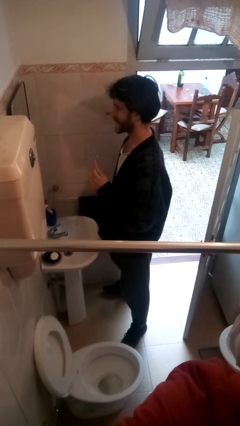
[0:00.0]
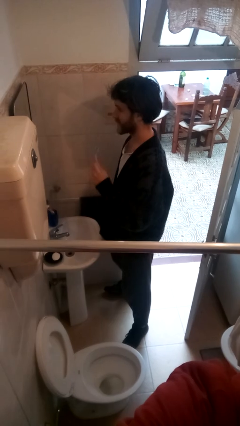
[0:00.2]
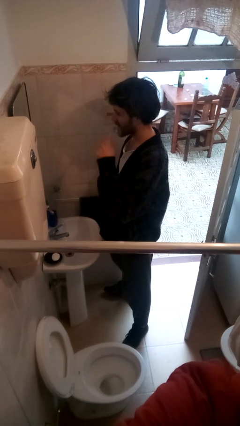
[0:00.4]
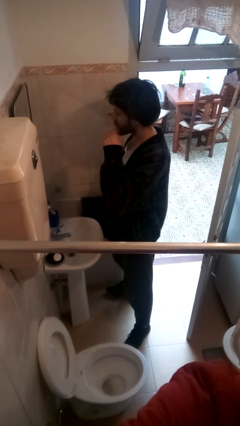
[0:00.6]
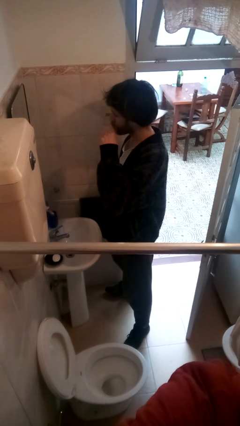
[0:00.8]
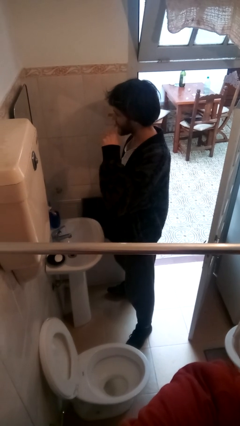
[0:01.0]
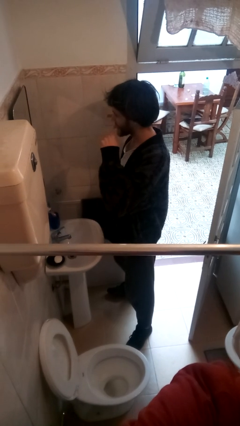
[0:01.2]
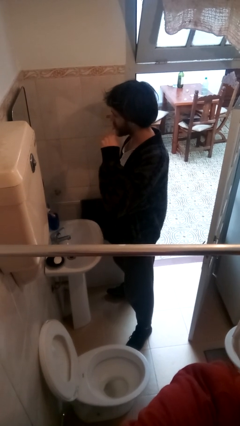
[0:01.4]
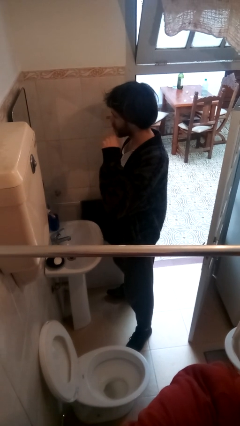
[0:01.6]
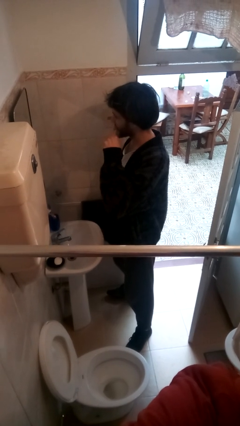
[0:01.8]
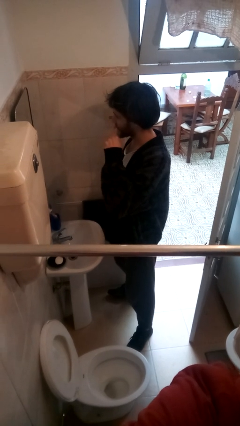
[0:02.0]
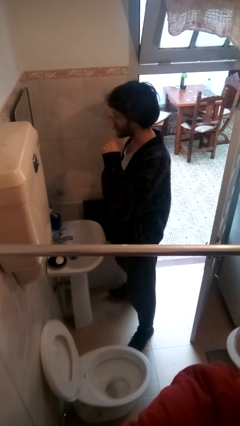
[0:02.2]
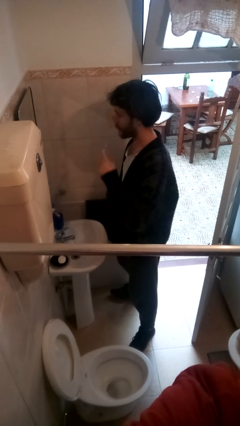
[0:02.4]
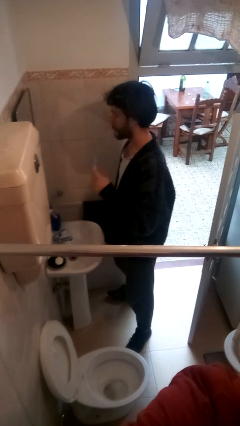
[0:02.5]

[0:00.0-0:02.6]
person brushes teeth

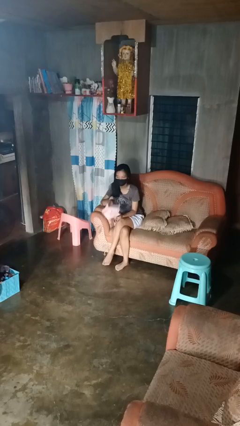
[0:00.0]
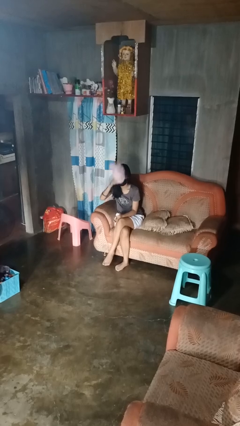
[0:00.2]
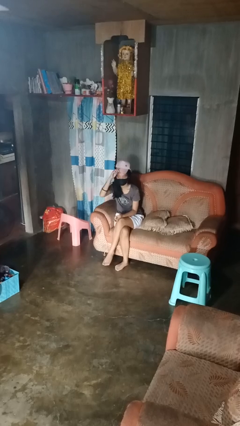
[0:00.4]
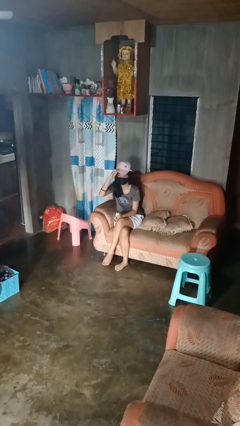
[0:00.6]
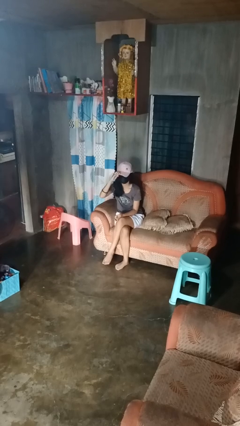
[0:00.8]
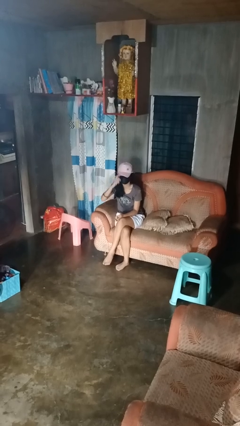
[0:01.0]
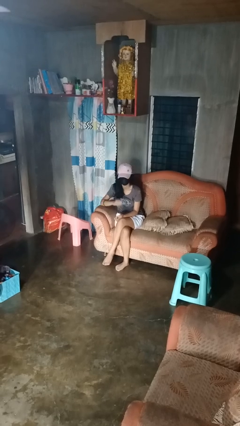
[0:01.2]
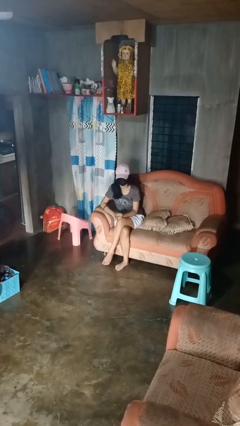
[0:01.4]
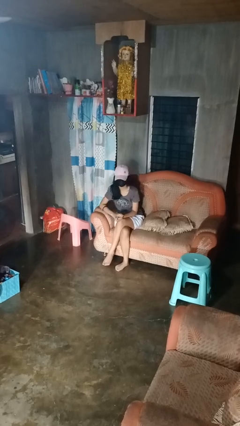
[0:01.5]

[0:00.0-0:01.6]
person puts on hat

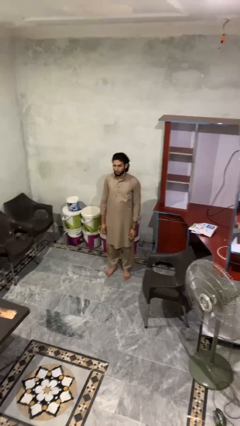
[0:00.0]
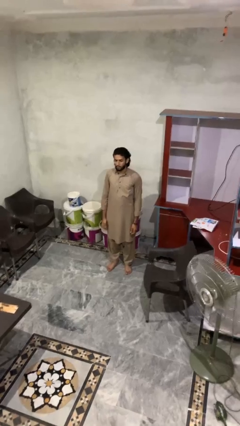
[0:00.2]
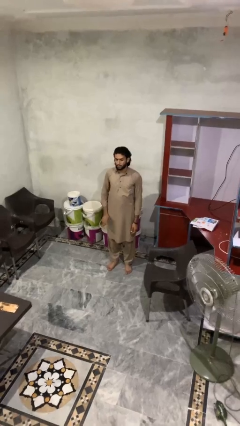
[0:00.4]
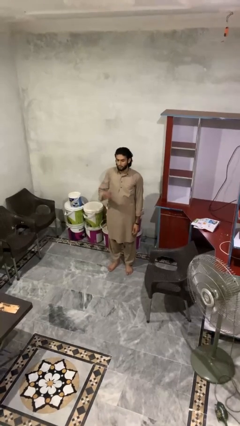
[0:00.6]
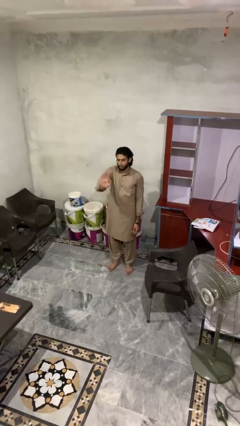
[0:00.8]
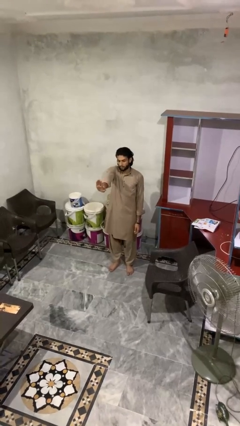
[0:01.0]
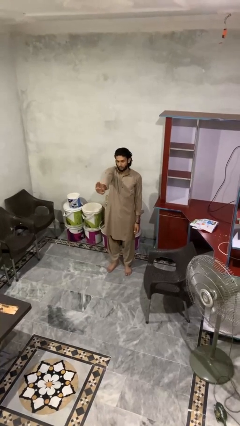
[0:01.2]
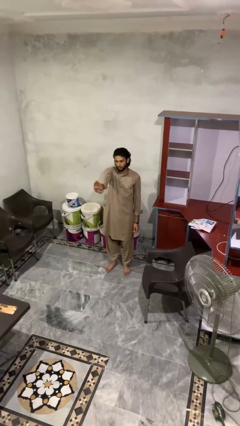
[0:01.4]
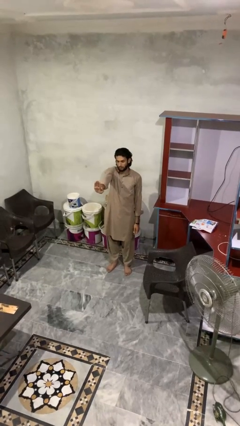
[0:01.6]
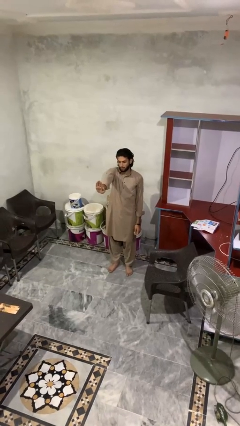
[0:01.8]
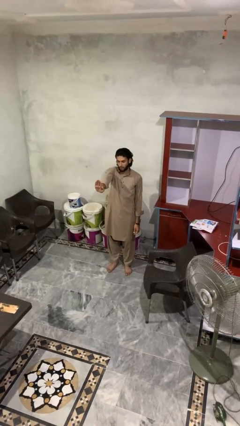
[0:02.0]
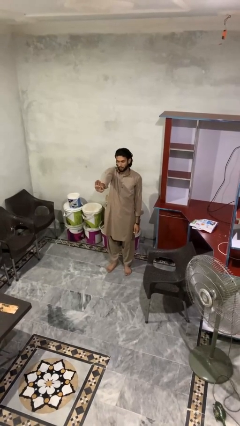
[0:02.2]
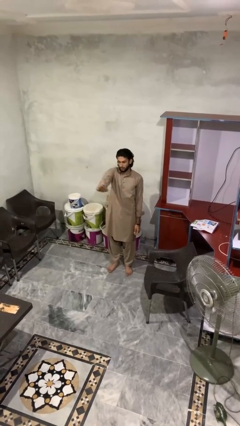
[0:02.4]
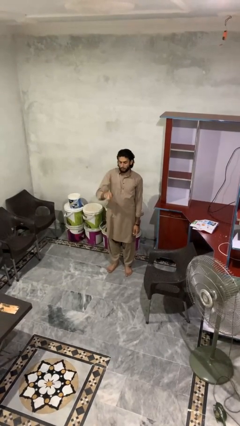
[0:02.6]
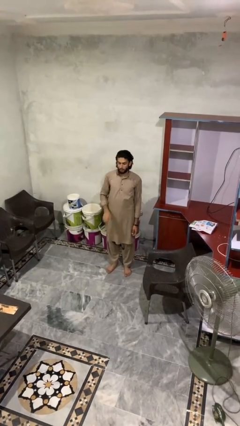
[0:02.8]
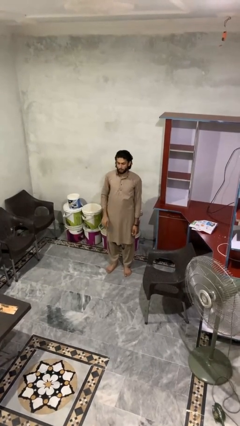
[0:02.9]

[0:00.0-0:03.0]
person gestures stop

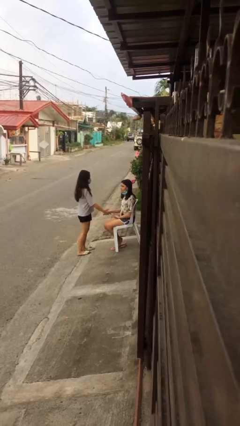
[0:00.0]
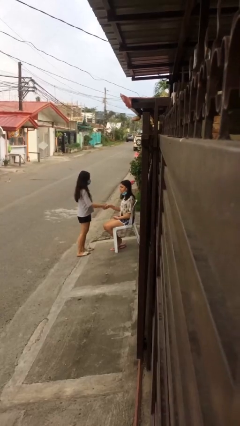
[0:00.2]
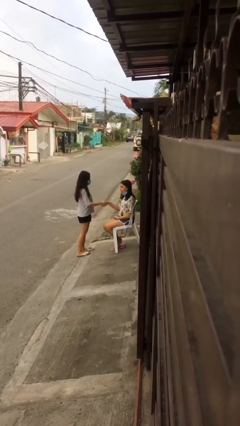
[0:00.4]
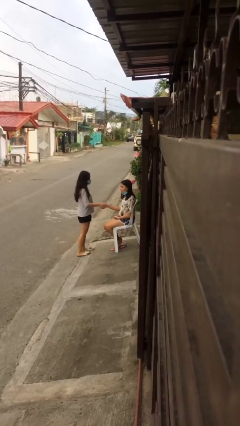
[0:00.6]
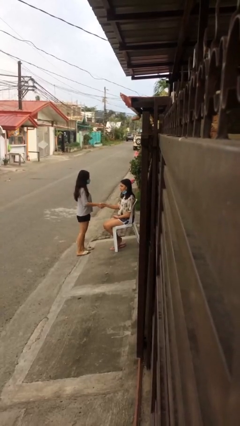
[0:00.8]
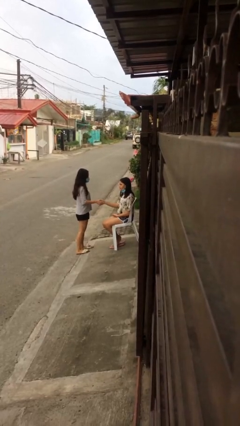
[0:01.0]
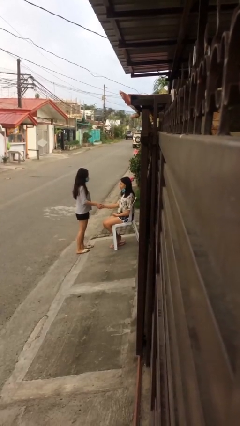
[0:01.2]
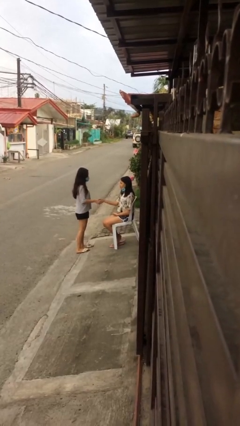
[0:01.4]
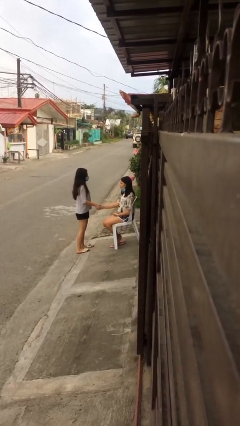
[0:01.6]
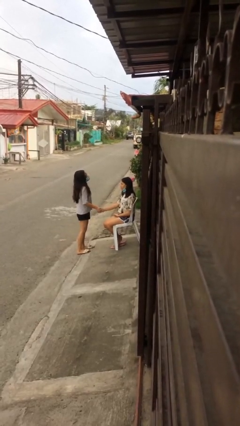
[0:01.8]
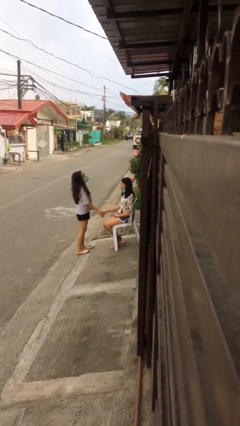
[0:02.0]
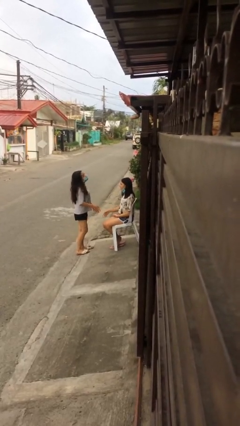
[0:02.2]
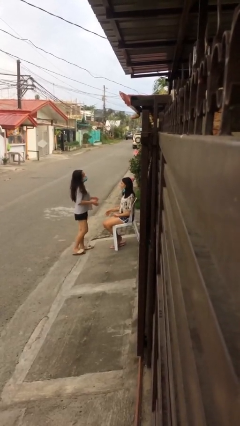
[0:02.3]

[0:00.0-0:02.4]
person shakes hand

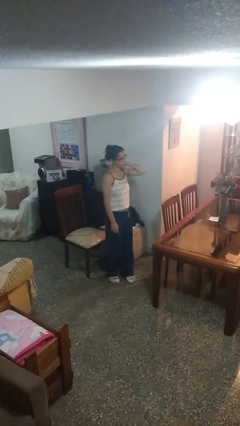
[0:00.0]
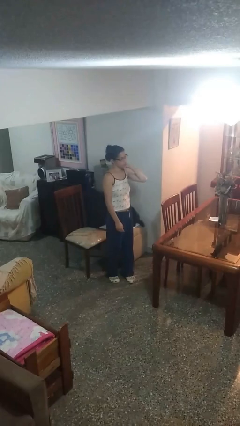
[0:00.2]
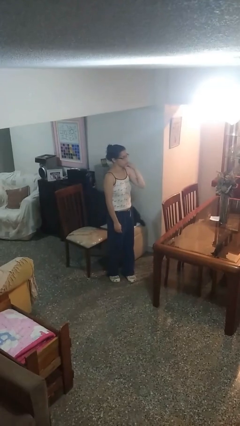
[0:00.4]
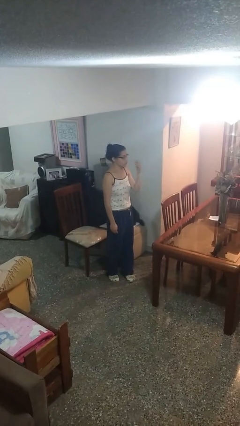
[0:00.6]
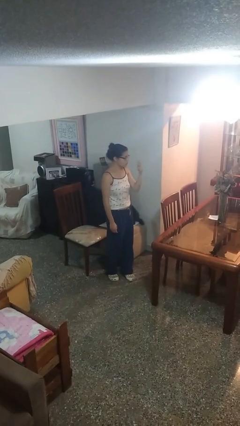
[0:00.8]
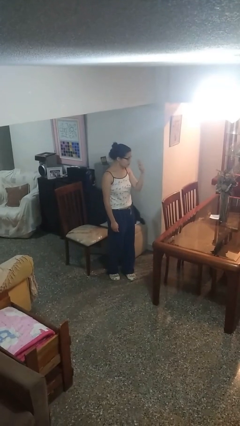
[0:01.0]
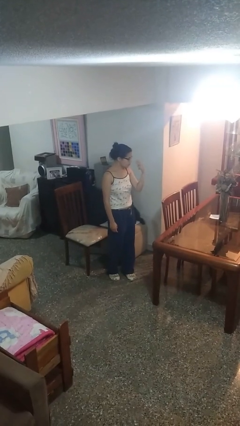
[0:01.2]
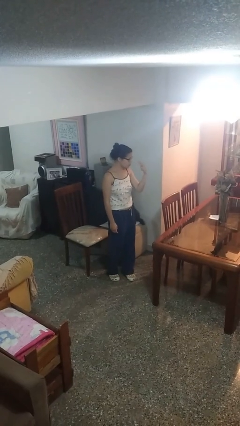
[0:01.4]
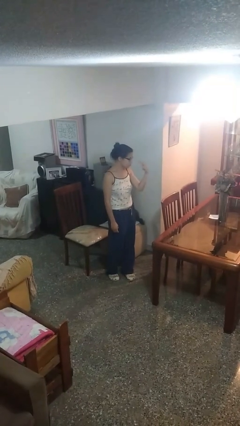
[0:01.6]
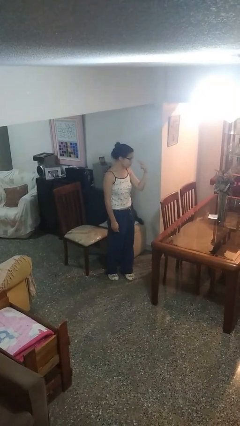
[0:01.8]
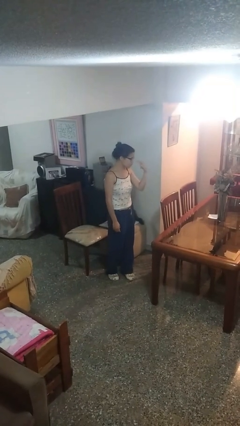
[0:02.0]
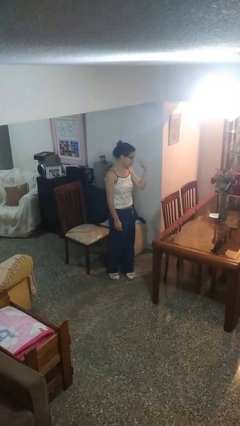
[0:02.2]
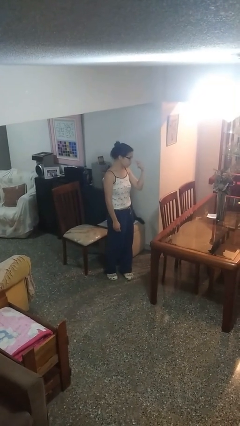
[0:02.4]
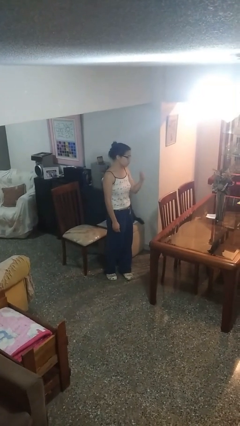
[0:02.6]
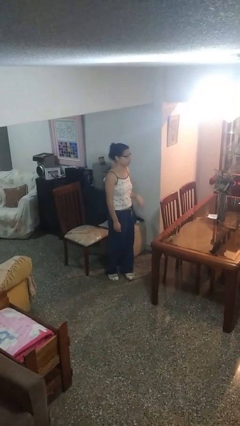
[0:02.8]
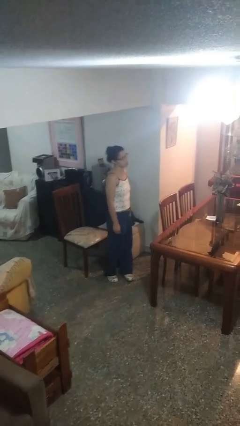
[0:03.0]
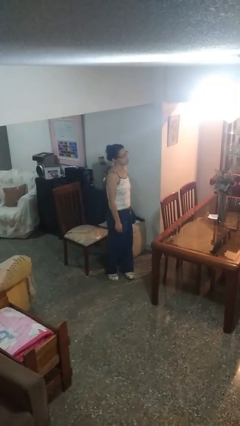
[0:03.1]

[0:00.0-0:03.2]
person gestures watch closely

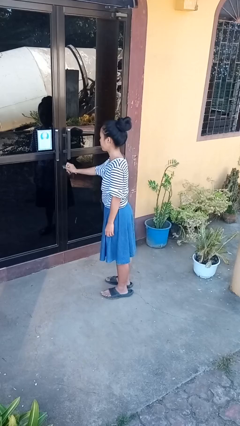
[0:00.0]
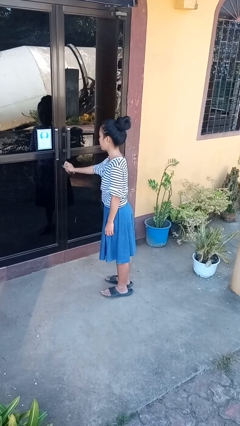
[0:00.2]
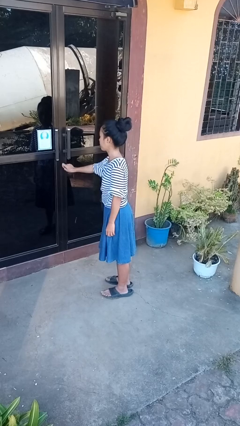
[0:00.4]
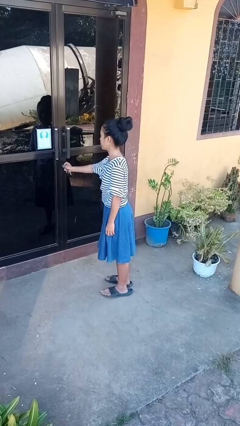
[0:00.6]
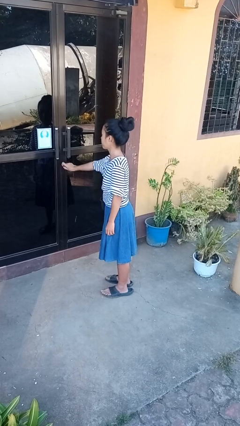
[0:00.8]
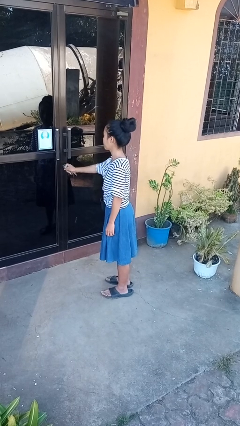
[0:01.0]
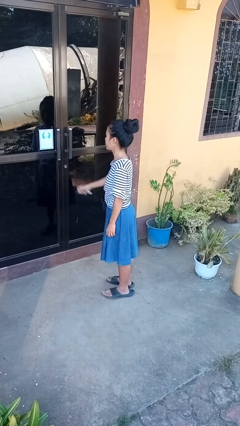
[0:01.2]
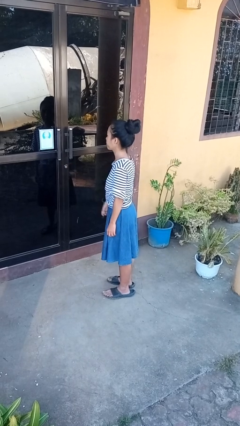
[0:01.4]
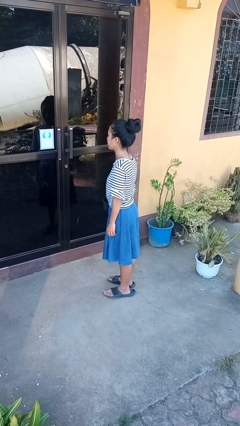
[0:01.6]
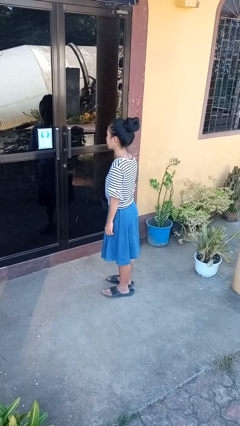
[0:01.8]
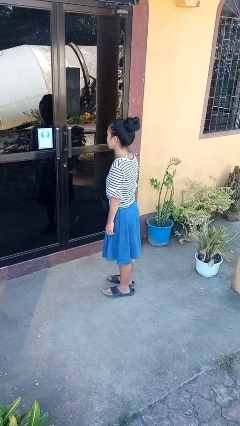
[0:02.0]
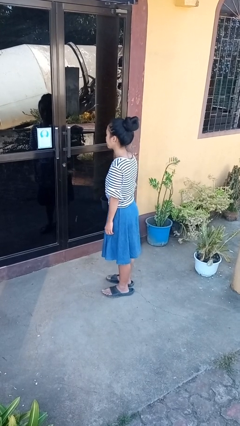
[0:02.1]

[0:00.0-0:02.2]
person locks door with keys

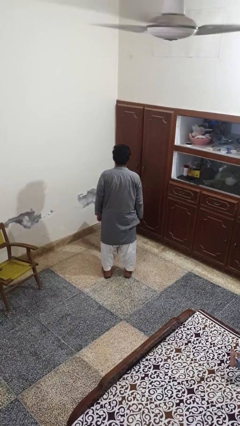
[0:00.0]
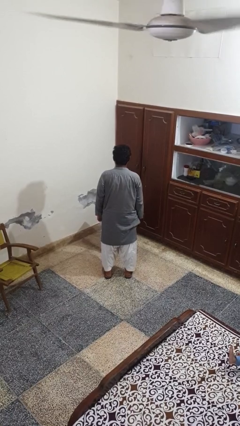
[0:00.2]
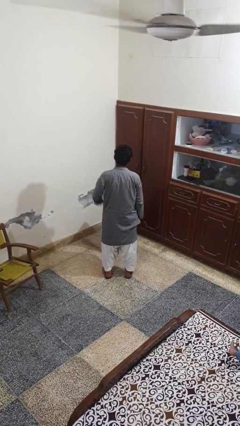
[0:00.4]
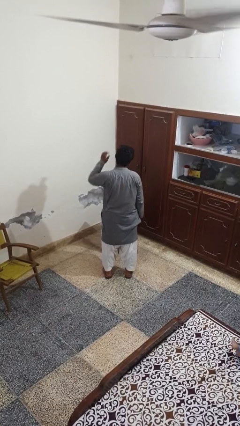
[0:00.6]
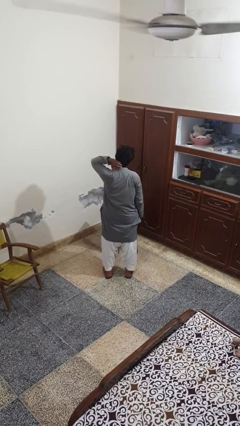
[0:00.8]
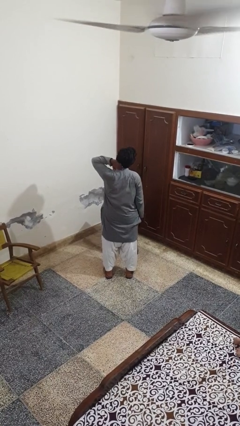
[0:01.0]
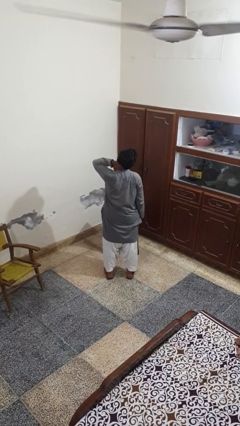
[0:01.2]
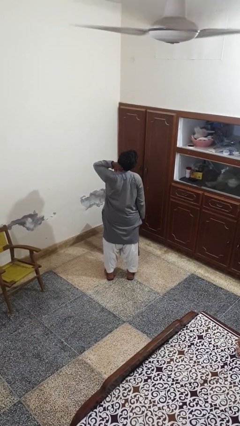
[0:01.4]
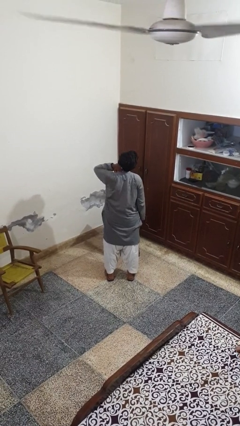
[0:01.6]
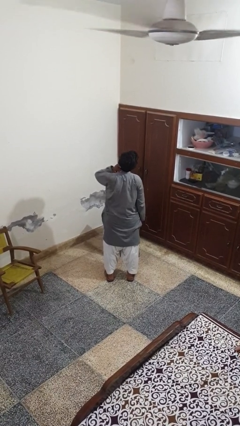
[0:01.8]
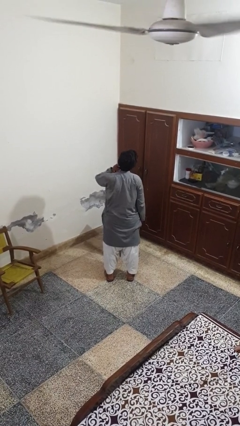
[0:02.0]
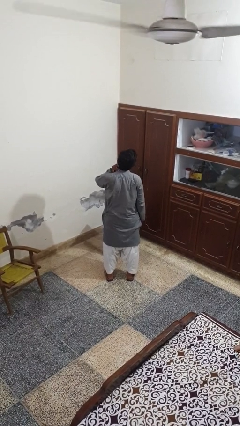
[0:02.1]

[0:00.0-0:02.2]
person rubs neck
